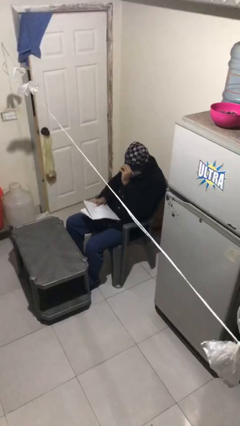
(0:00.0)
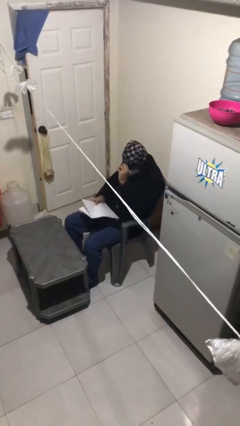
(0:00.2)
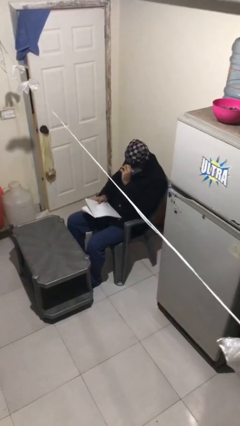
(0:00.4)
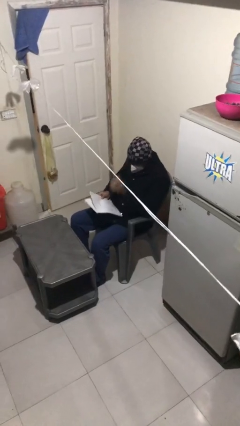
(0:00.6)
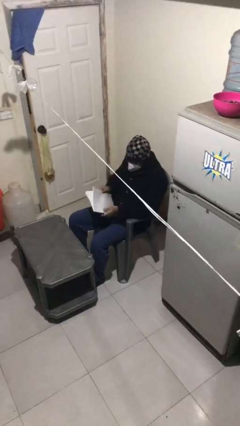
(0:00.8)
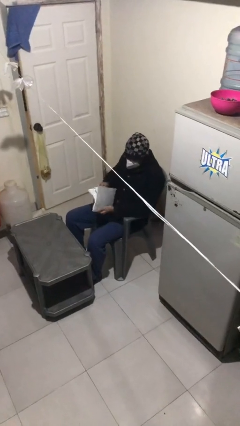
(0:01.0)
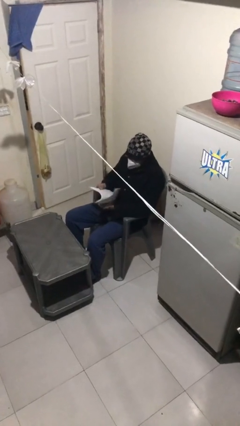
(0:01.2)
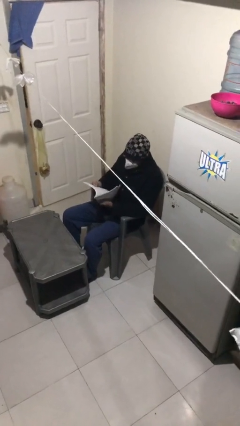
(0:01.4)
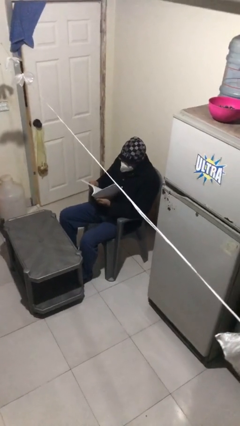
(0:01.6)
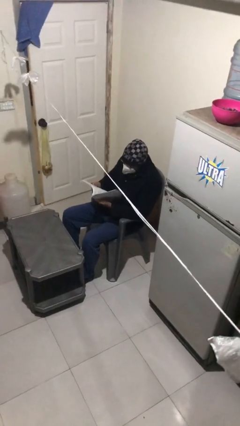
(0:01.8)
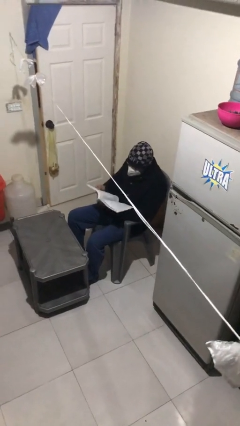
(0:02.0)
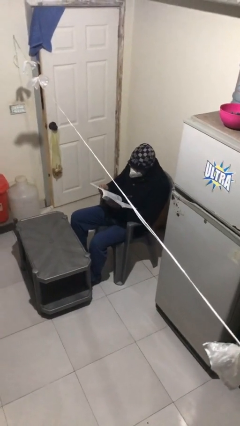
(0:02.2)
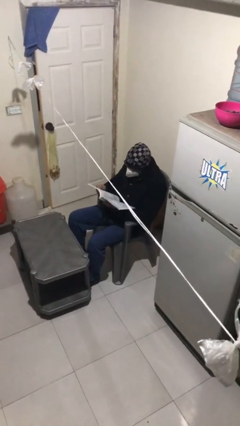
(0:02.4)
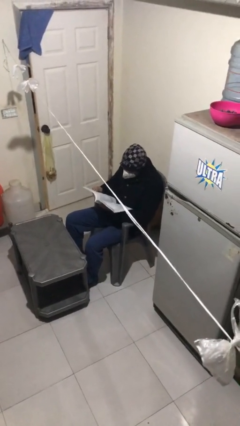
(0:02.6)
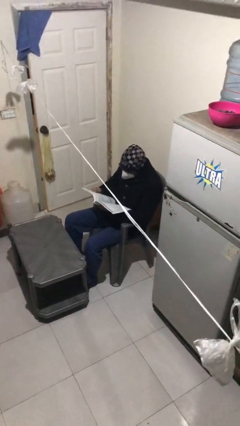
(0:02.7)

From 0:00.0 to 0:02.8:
person reads document

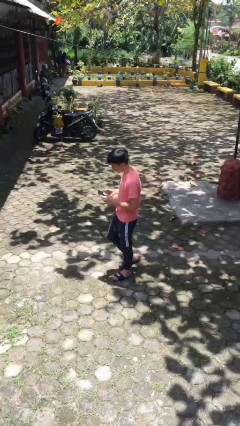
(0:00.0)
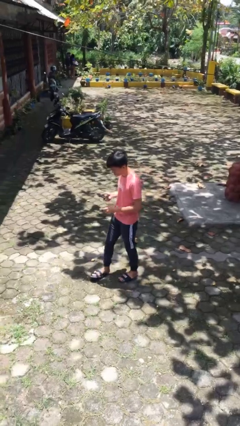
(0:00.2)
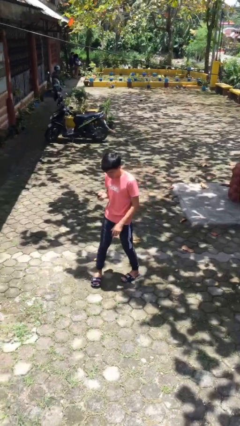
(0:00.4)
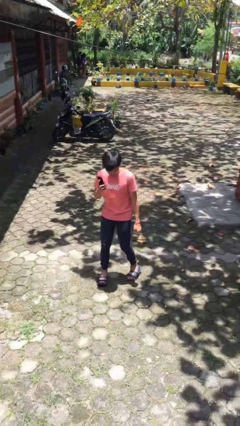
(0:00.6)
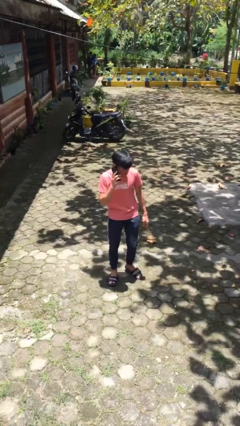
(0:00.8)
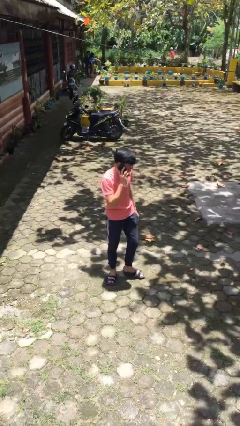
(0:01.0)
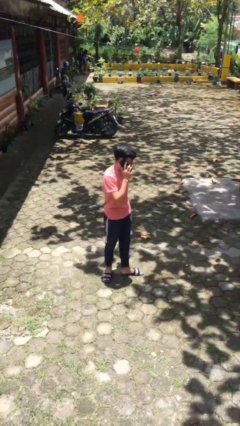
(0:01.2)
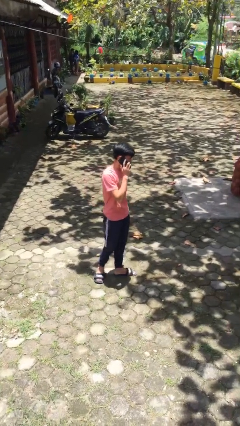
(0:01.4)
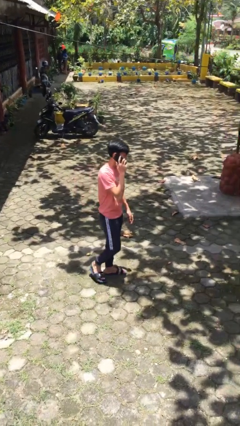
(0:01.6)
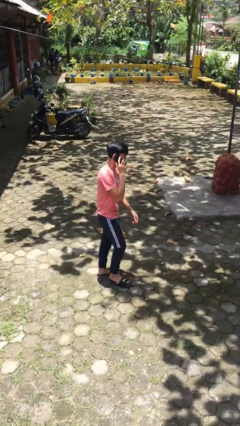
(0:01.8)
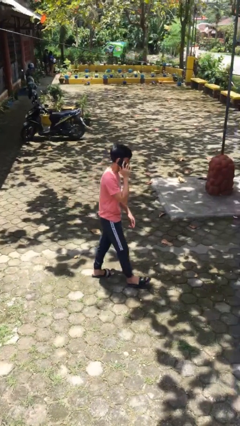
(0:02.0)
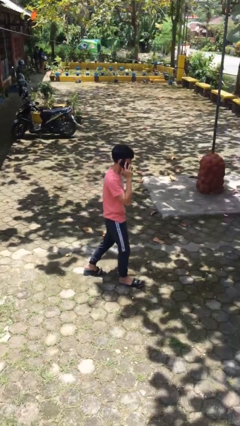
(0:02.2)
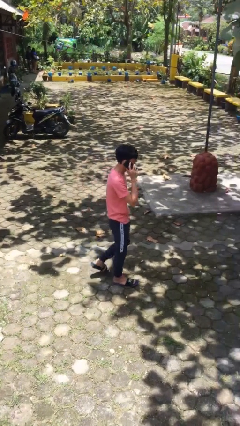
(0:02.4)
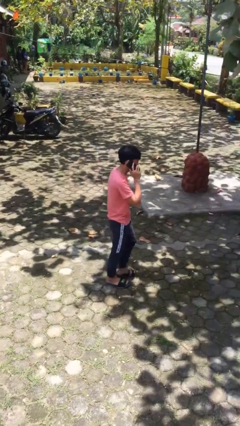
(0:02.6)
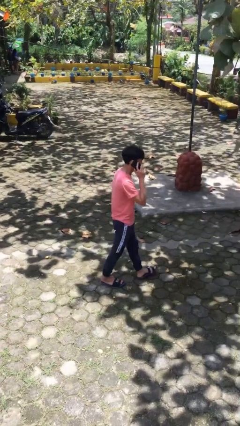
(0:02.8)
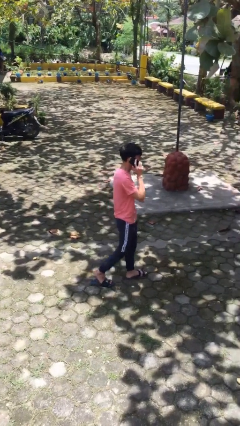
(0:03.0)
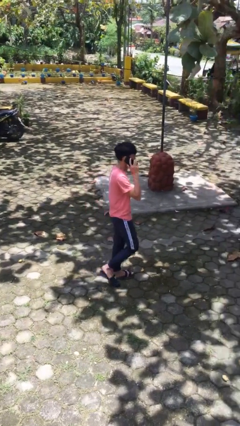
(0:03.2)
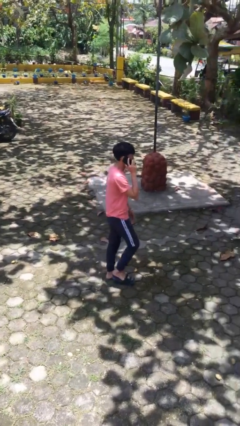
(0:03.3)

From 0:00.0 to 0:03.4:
person talks on phone

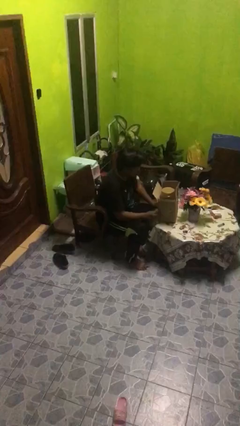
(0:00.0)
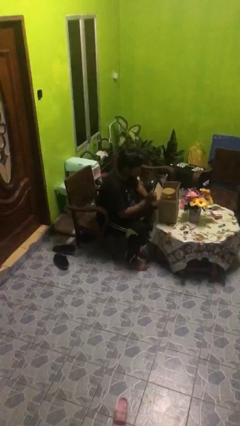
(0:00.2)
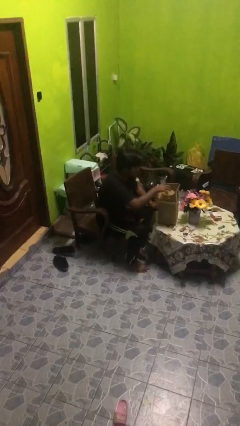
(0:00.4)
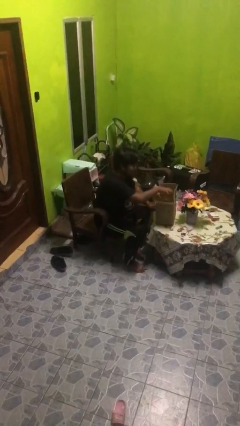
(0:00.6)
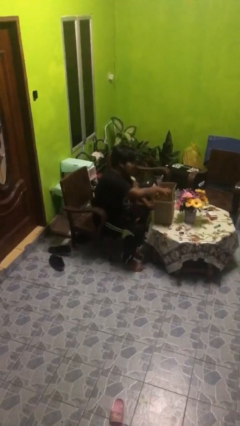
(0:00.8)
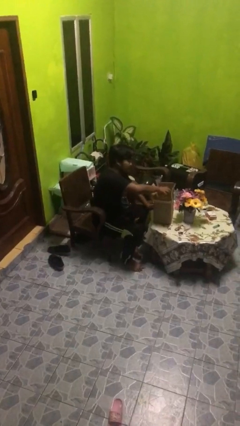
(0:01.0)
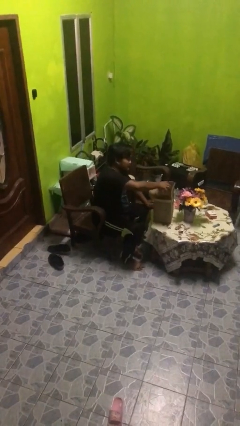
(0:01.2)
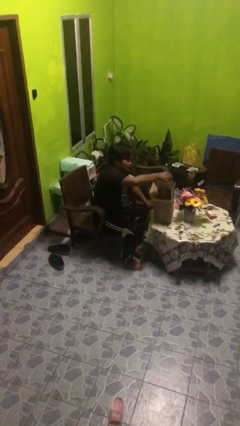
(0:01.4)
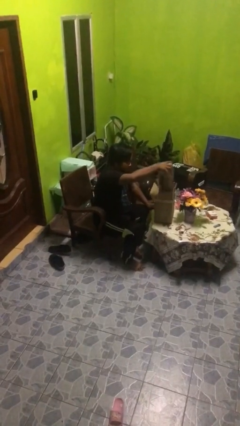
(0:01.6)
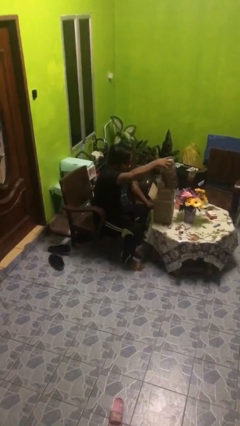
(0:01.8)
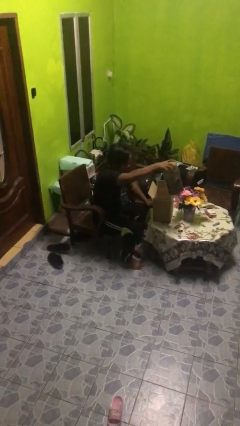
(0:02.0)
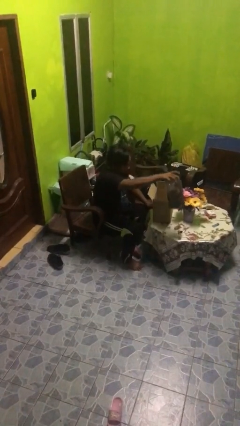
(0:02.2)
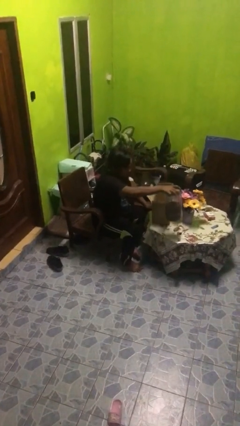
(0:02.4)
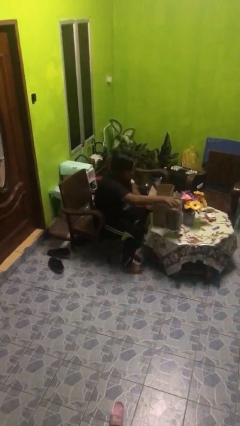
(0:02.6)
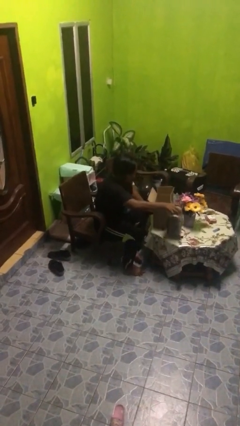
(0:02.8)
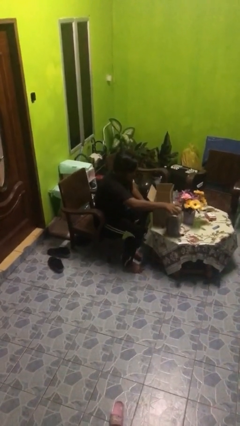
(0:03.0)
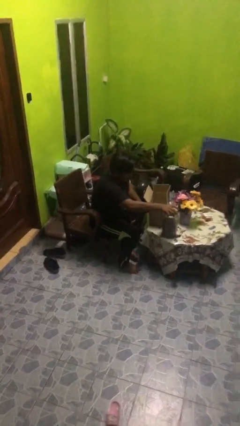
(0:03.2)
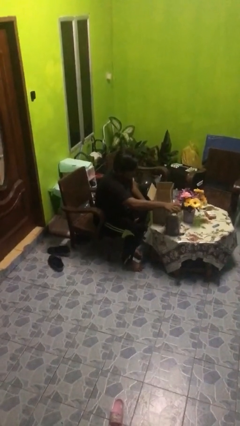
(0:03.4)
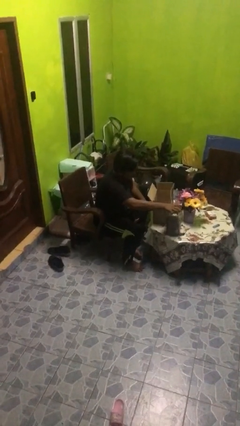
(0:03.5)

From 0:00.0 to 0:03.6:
person takes object from box

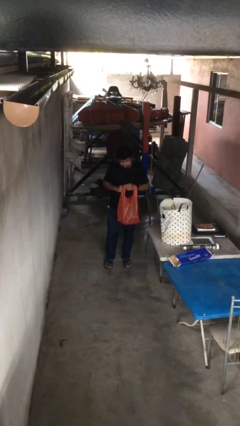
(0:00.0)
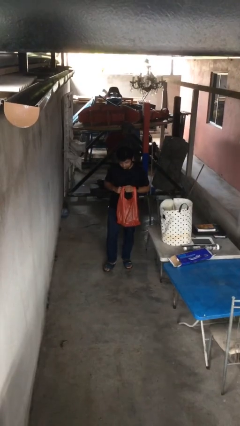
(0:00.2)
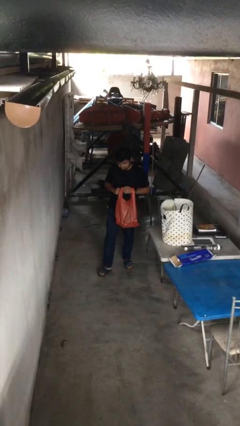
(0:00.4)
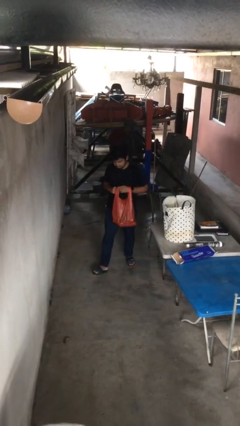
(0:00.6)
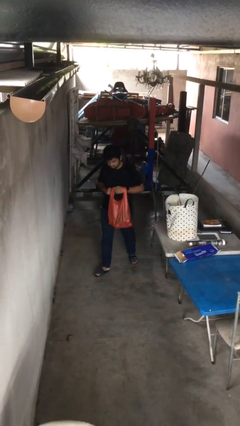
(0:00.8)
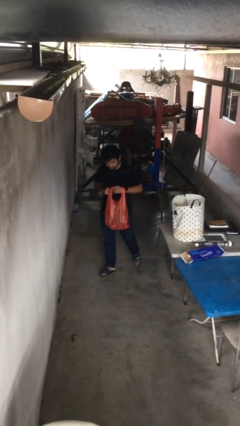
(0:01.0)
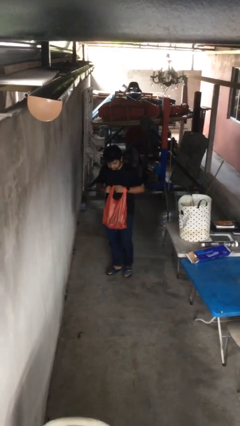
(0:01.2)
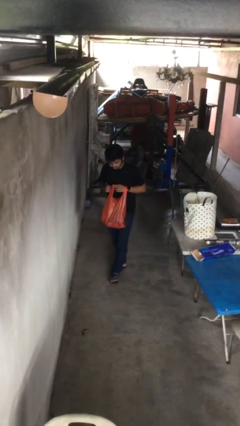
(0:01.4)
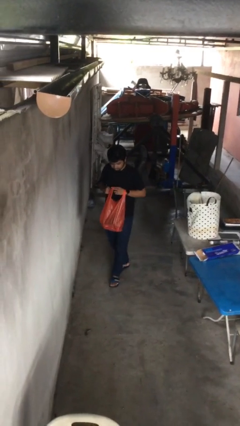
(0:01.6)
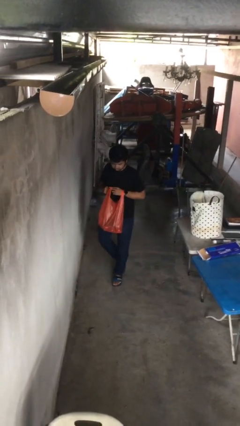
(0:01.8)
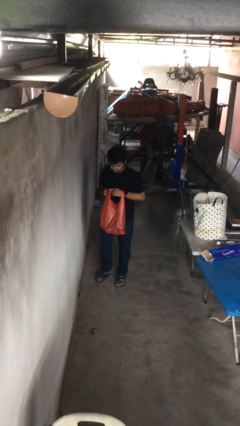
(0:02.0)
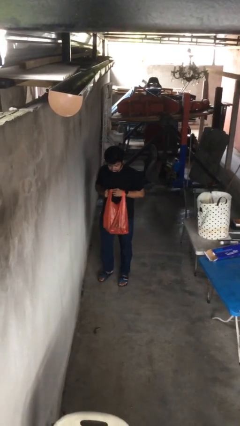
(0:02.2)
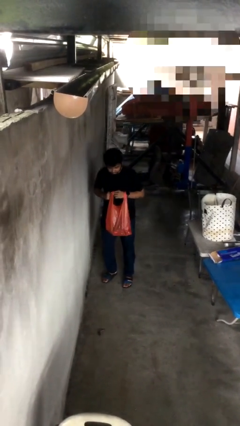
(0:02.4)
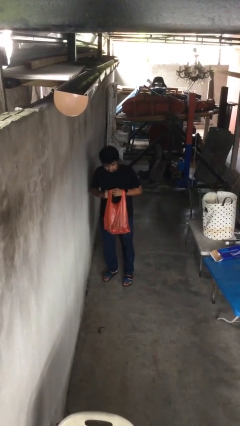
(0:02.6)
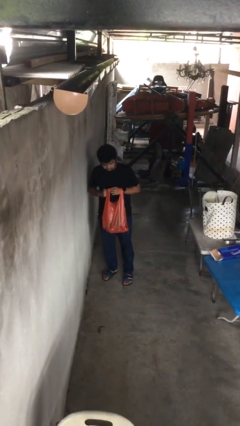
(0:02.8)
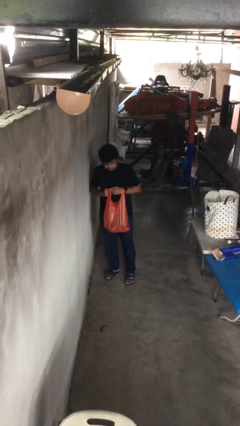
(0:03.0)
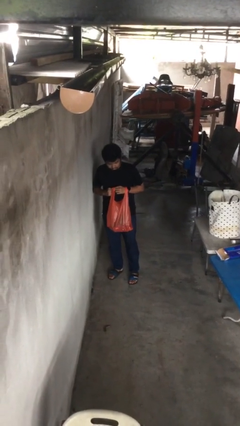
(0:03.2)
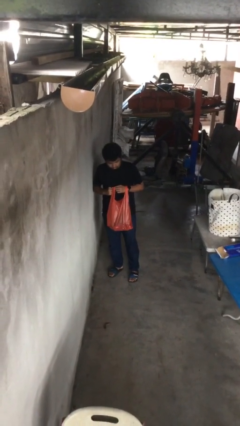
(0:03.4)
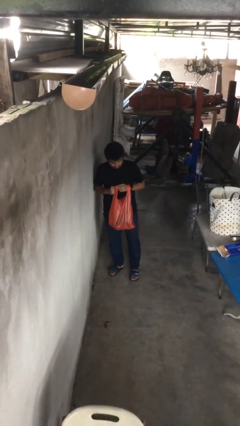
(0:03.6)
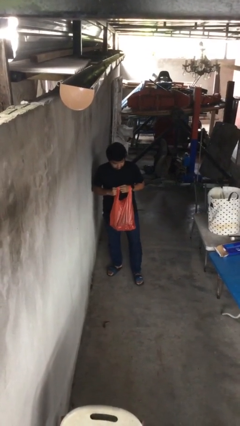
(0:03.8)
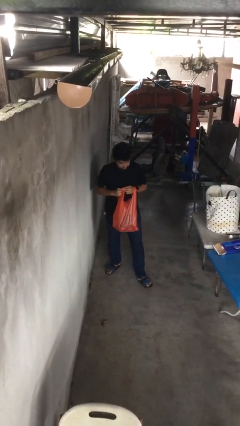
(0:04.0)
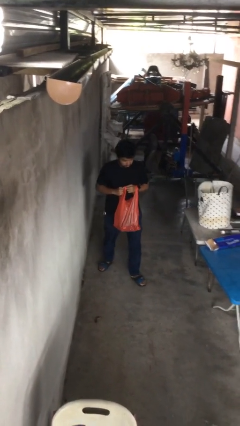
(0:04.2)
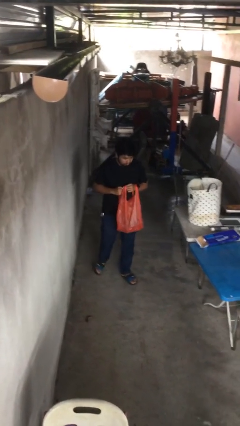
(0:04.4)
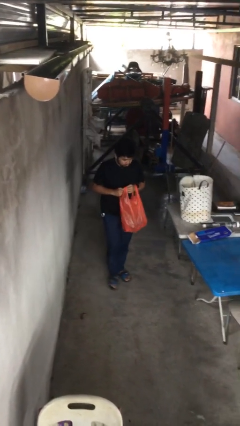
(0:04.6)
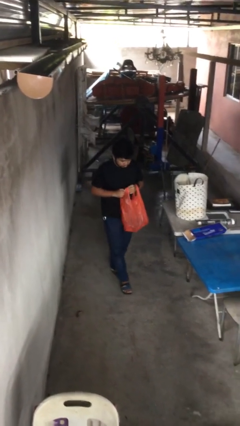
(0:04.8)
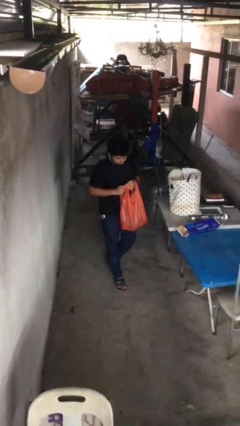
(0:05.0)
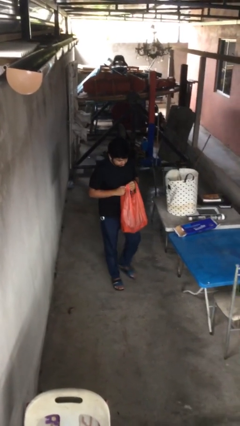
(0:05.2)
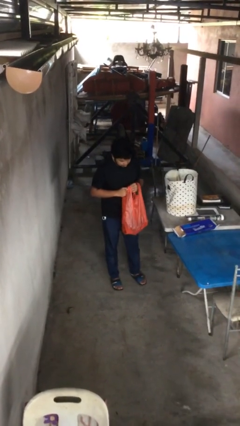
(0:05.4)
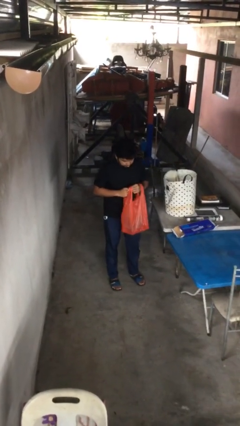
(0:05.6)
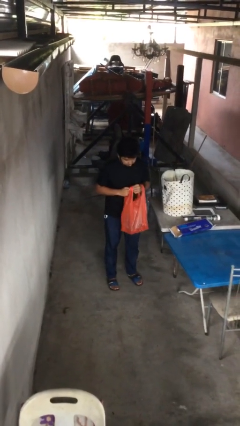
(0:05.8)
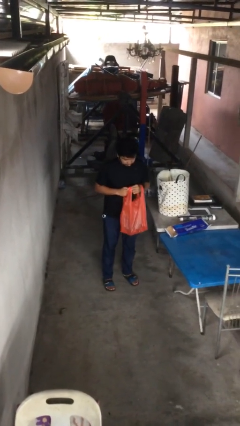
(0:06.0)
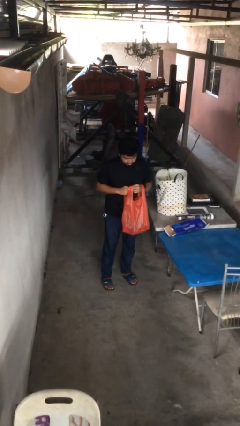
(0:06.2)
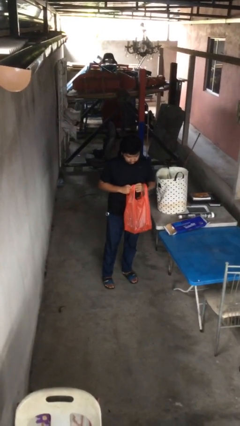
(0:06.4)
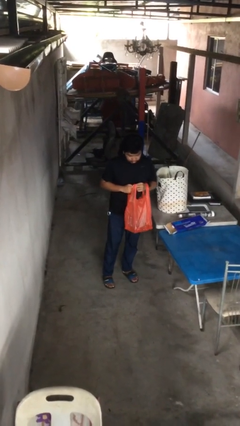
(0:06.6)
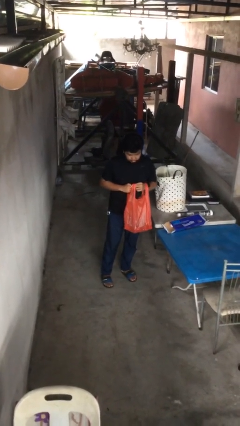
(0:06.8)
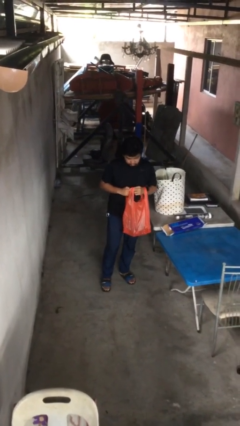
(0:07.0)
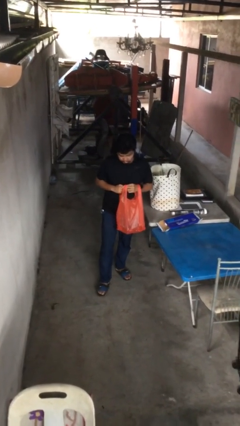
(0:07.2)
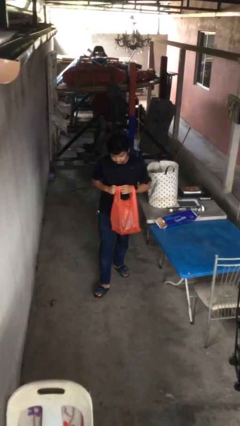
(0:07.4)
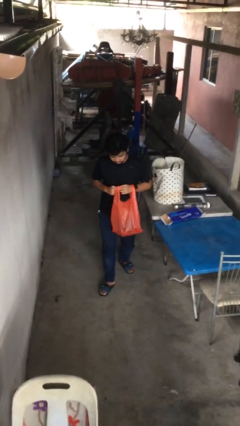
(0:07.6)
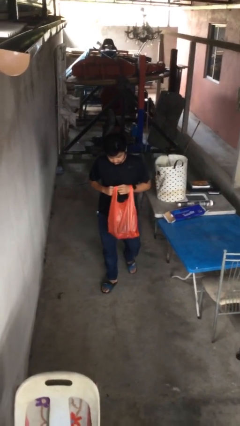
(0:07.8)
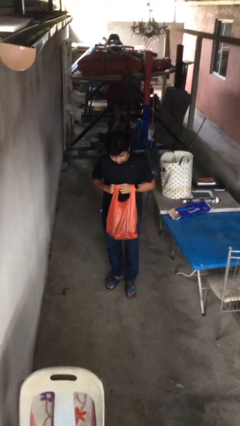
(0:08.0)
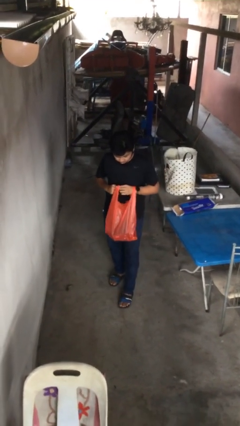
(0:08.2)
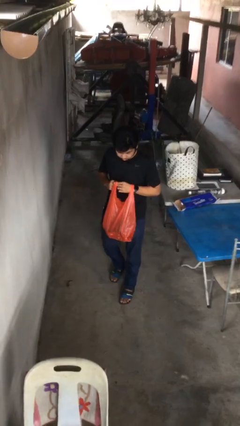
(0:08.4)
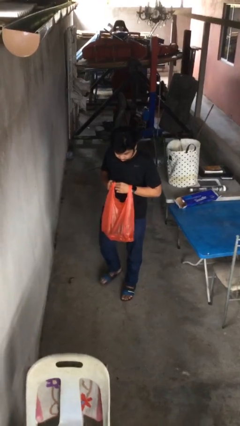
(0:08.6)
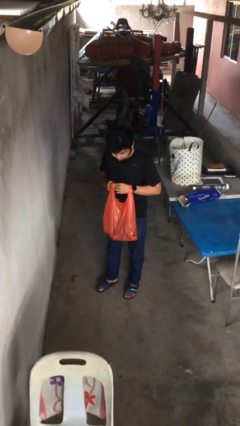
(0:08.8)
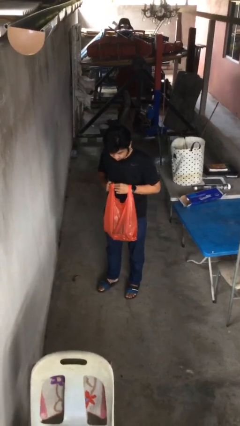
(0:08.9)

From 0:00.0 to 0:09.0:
person carries groceries
